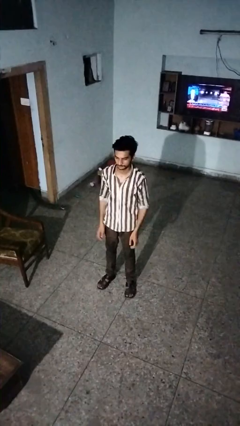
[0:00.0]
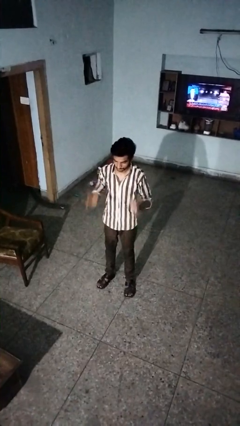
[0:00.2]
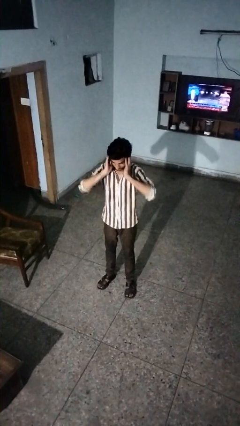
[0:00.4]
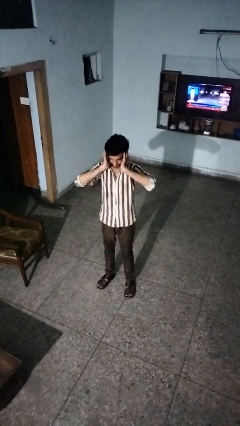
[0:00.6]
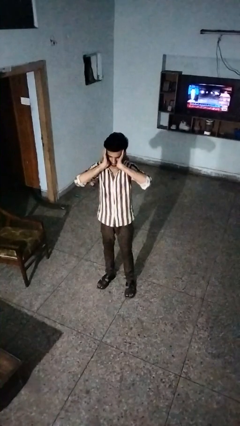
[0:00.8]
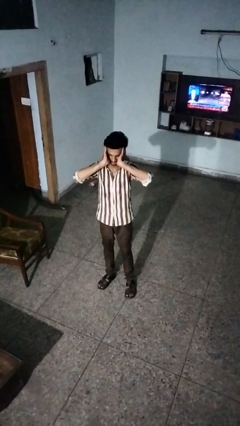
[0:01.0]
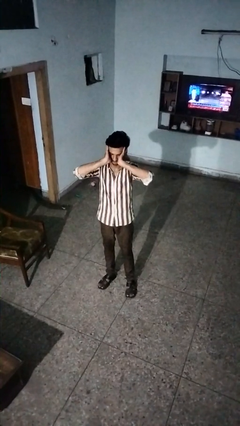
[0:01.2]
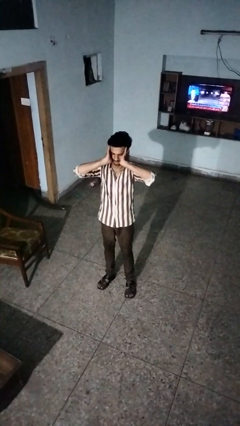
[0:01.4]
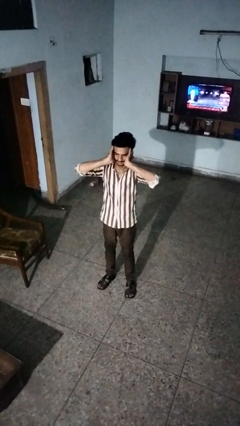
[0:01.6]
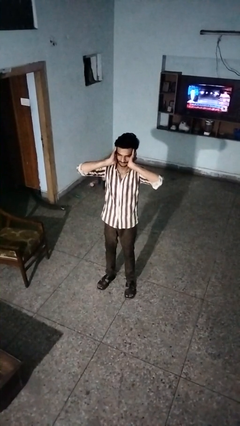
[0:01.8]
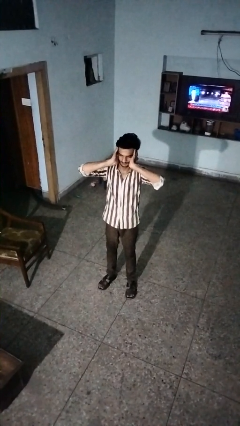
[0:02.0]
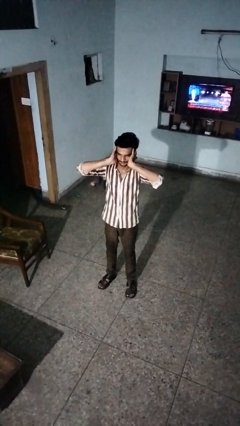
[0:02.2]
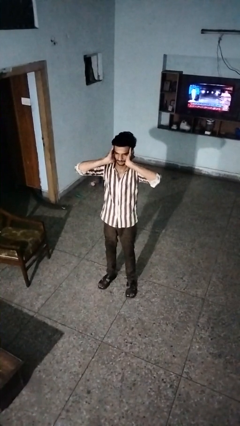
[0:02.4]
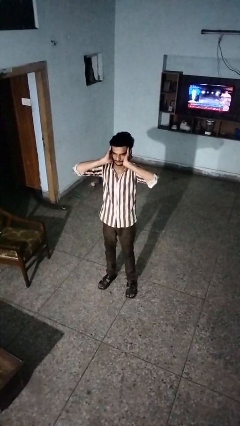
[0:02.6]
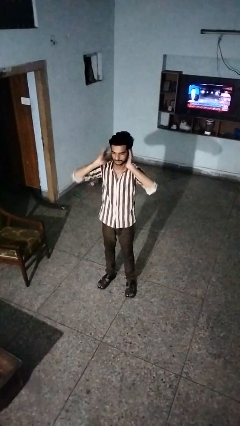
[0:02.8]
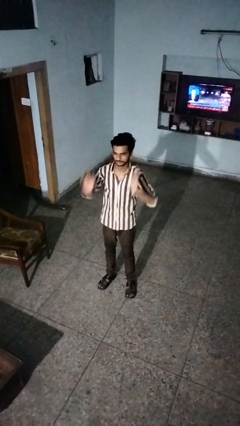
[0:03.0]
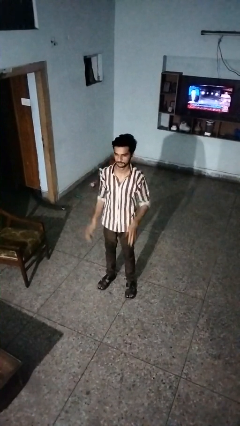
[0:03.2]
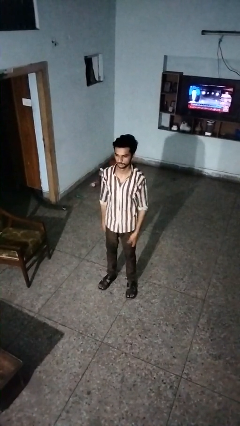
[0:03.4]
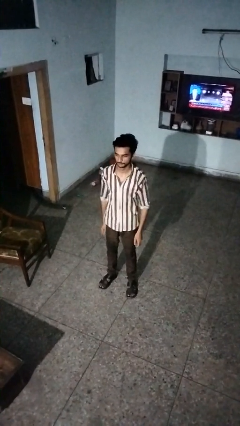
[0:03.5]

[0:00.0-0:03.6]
person puts fingers in ear

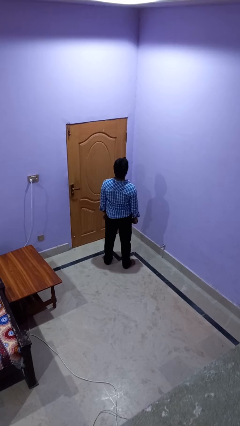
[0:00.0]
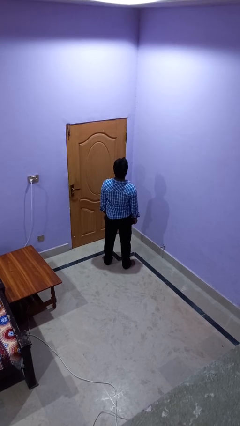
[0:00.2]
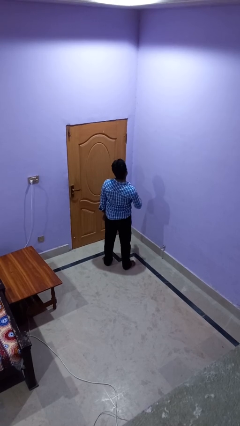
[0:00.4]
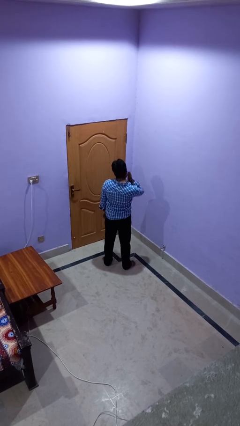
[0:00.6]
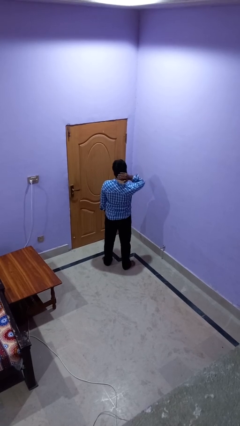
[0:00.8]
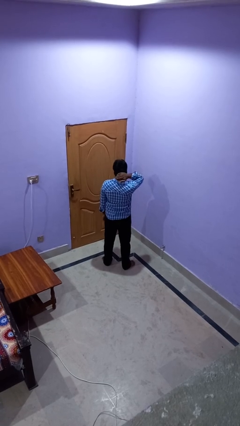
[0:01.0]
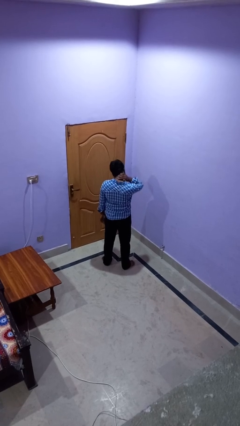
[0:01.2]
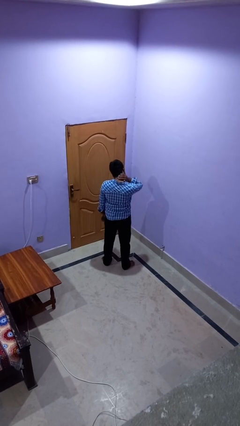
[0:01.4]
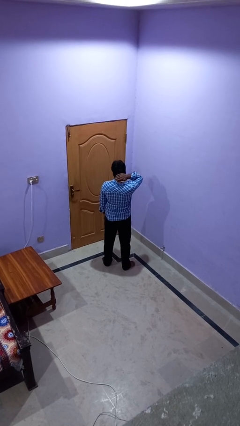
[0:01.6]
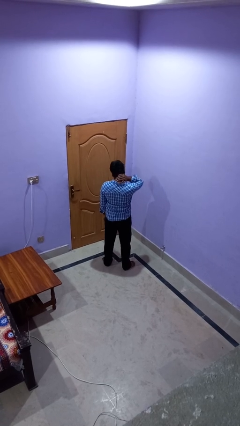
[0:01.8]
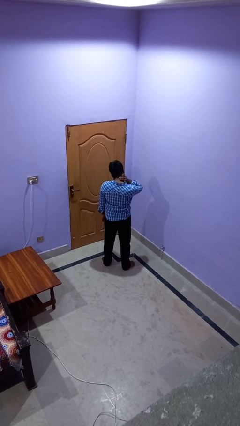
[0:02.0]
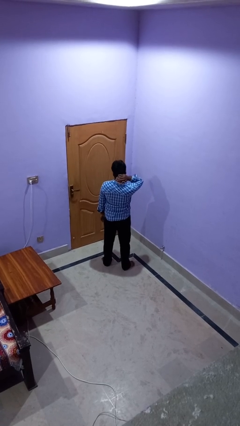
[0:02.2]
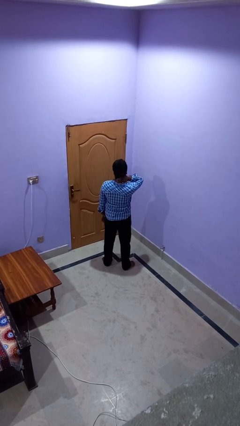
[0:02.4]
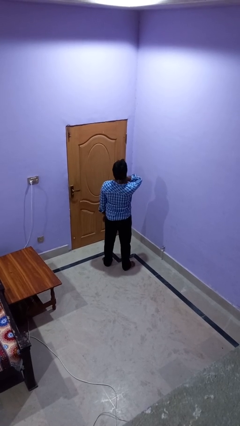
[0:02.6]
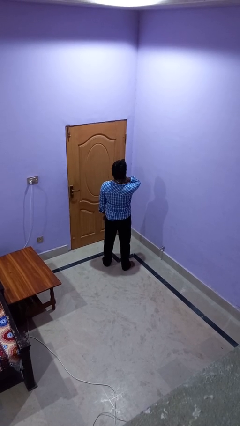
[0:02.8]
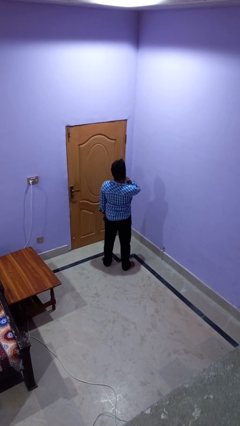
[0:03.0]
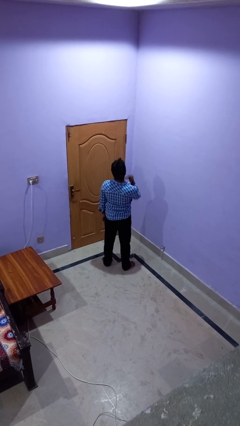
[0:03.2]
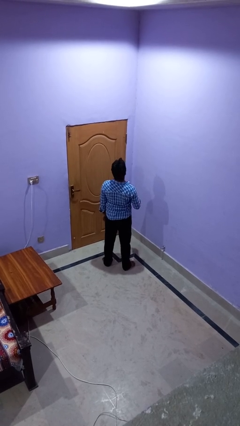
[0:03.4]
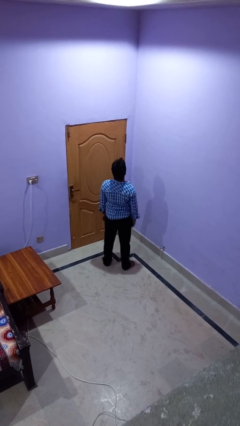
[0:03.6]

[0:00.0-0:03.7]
person rubs neck

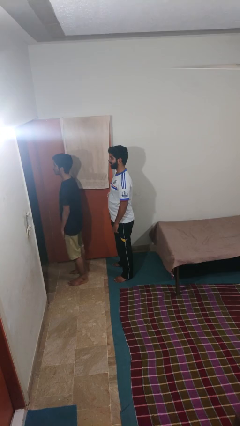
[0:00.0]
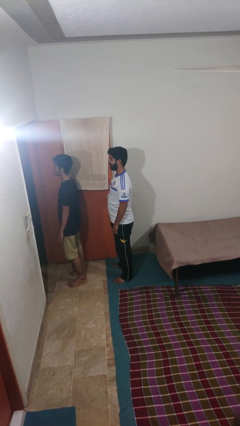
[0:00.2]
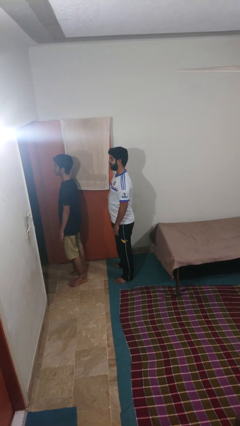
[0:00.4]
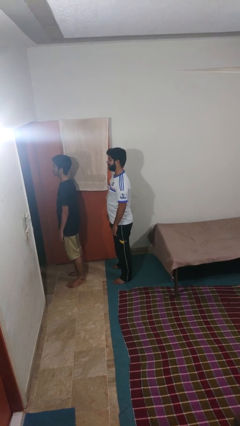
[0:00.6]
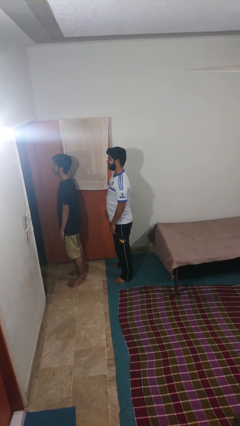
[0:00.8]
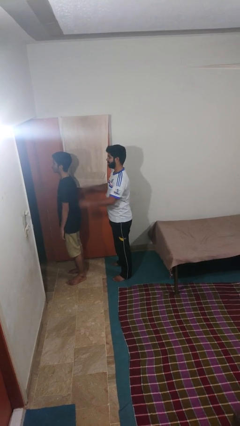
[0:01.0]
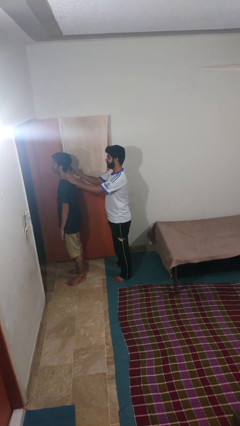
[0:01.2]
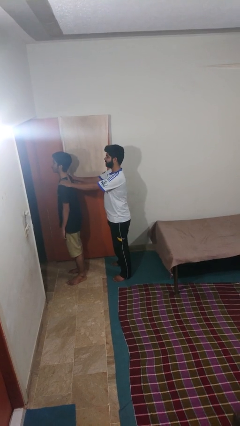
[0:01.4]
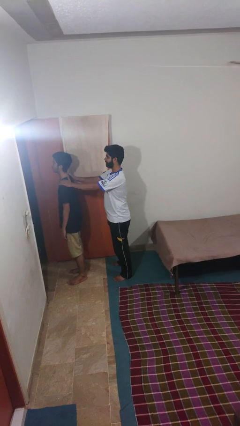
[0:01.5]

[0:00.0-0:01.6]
person grabs person by shoulder

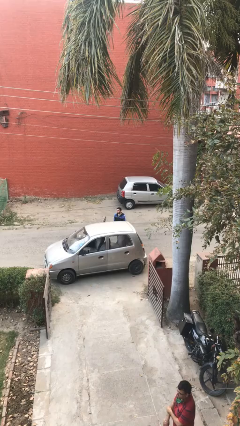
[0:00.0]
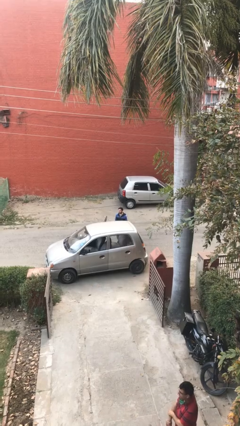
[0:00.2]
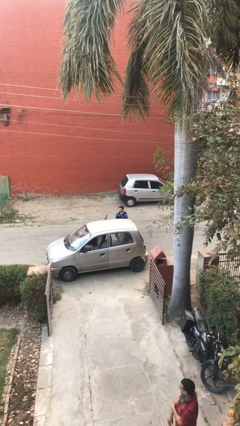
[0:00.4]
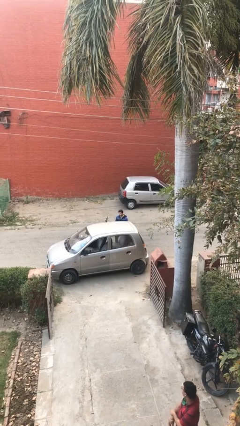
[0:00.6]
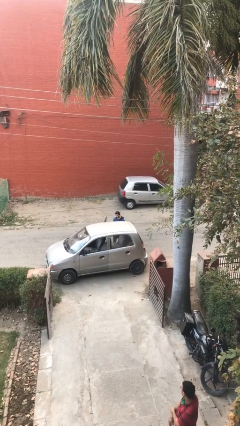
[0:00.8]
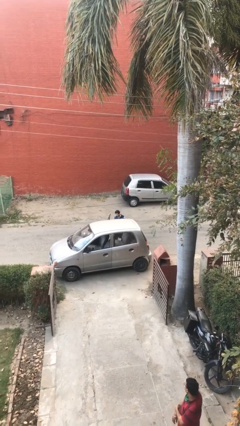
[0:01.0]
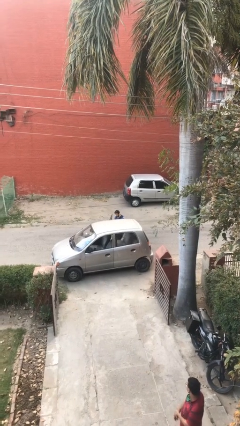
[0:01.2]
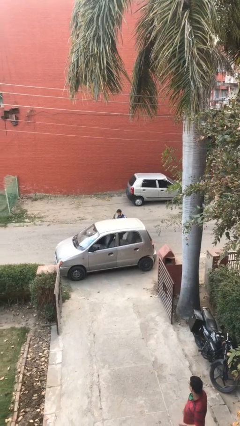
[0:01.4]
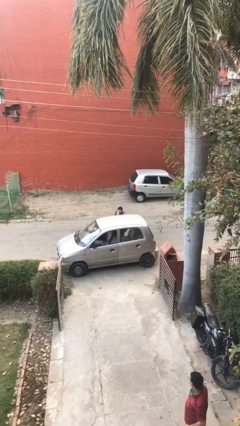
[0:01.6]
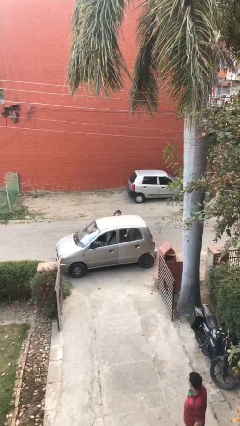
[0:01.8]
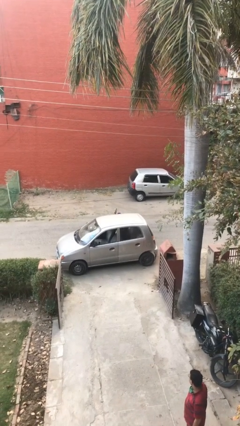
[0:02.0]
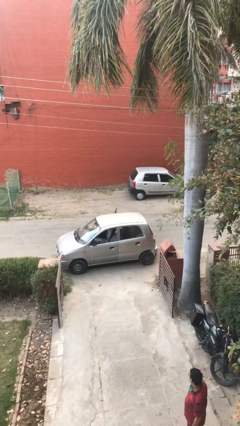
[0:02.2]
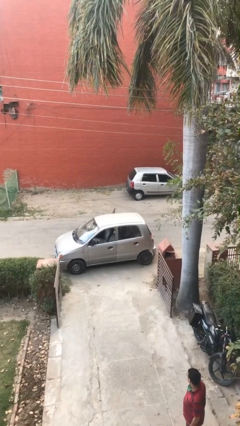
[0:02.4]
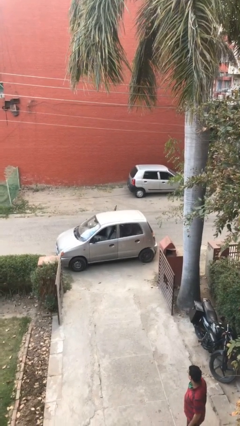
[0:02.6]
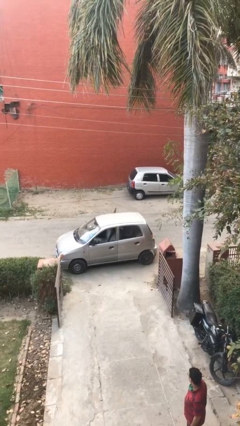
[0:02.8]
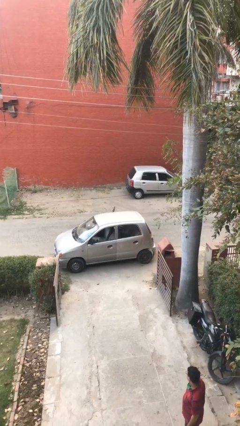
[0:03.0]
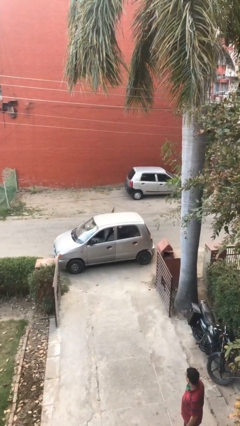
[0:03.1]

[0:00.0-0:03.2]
person enters car

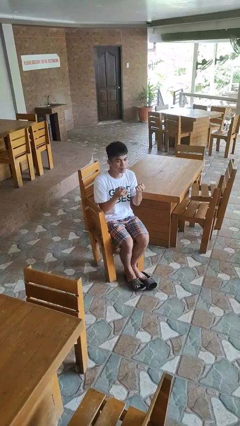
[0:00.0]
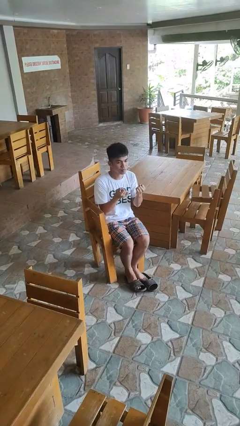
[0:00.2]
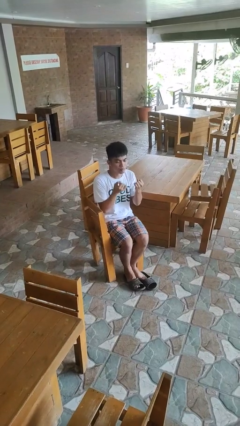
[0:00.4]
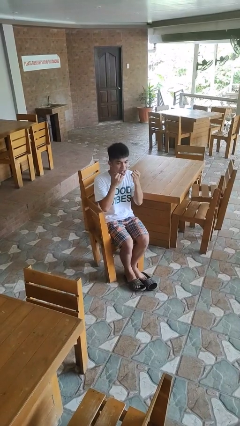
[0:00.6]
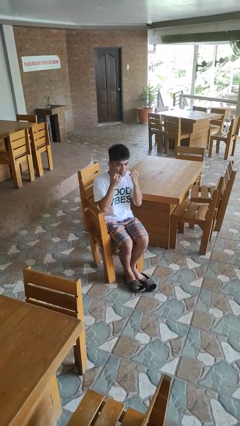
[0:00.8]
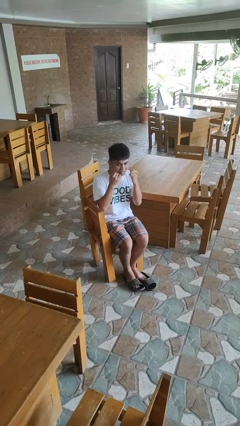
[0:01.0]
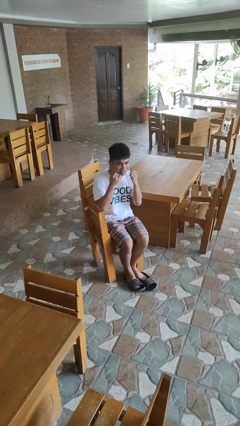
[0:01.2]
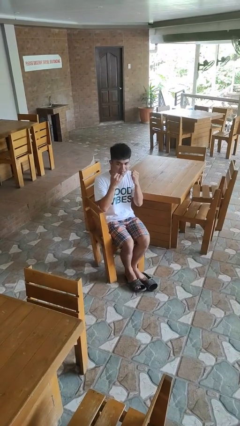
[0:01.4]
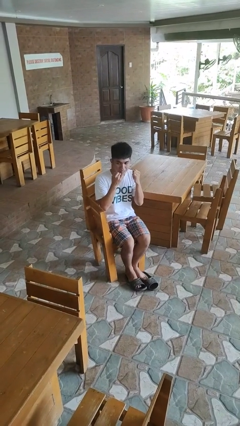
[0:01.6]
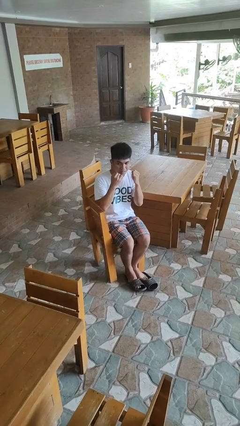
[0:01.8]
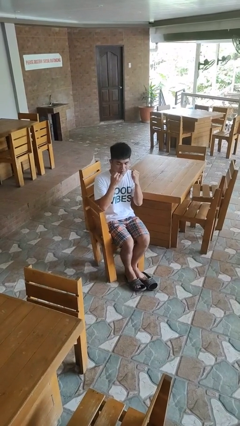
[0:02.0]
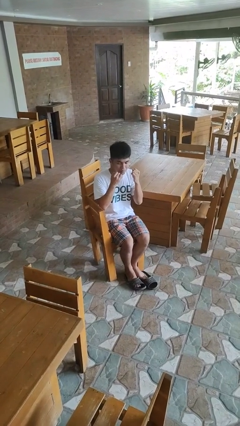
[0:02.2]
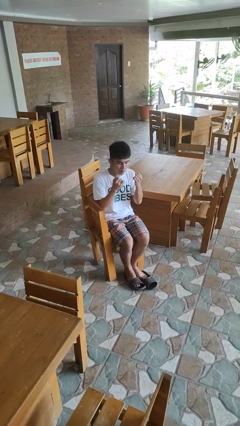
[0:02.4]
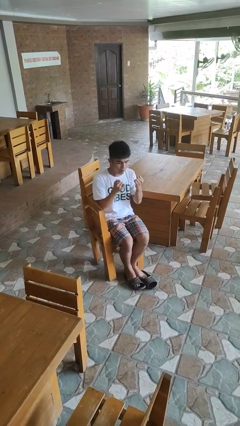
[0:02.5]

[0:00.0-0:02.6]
person flosses

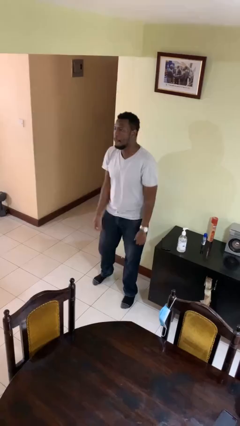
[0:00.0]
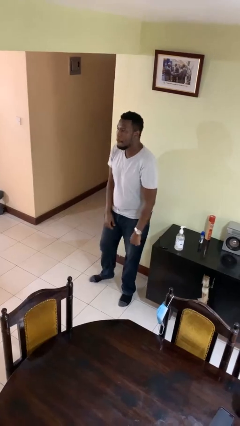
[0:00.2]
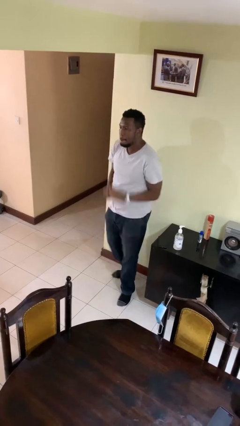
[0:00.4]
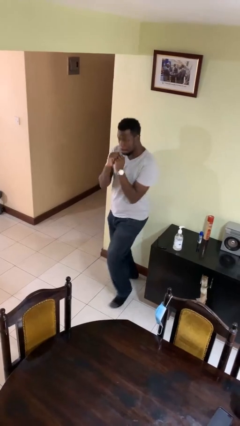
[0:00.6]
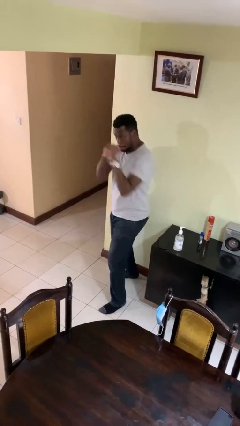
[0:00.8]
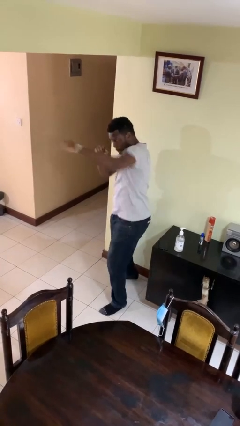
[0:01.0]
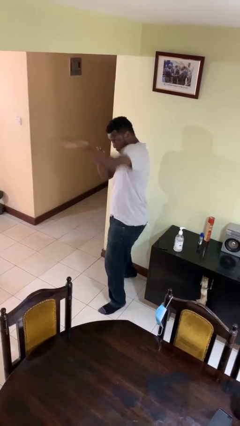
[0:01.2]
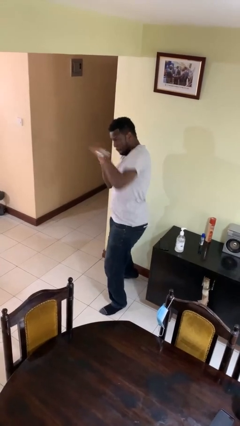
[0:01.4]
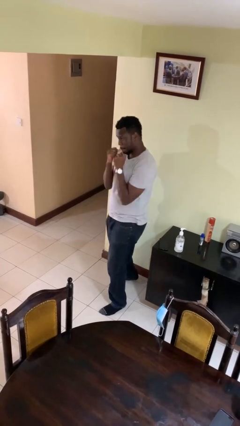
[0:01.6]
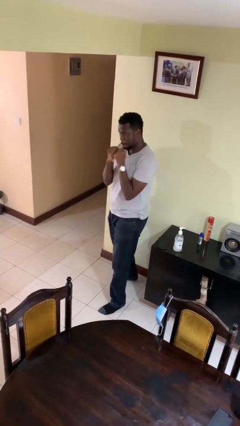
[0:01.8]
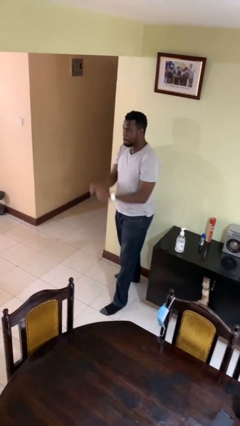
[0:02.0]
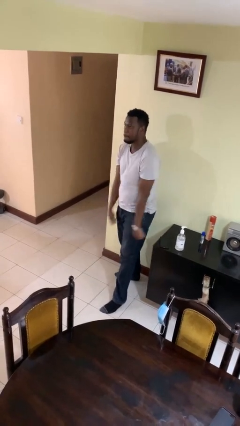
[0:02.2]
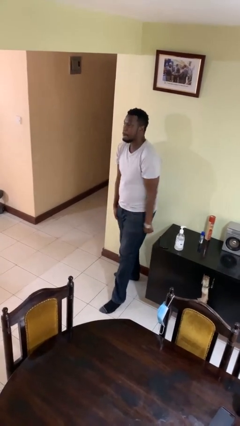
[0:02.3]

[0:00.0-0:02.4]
person punches
